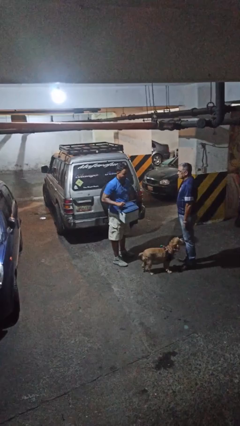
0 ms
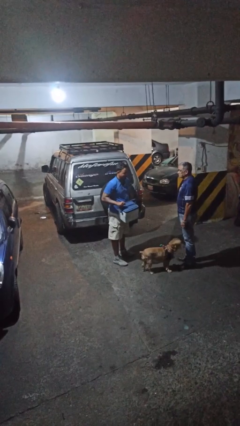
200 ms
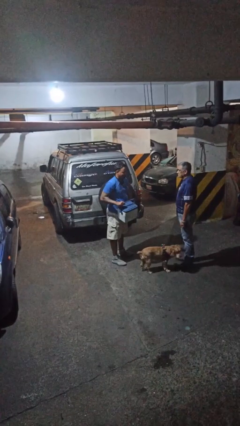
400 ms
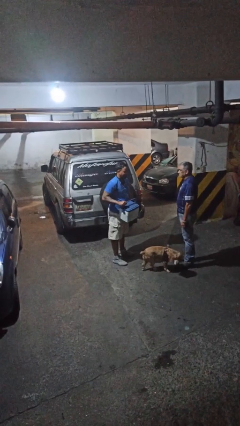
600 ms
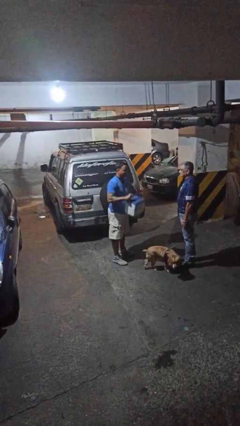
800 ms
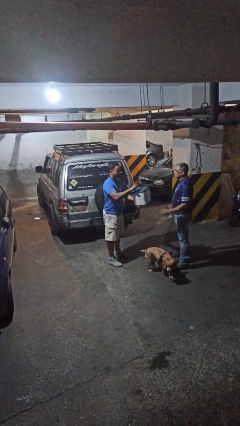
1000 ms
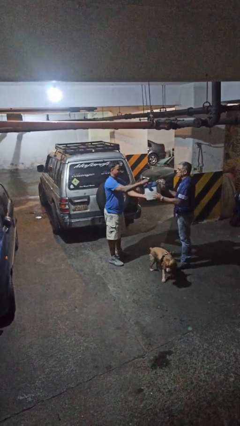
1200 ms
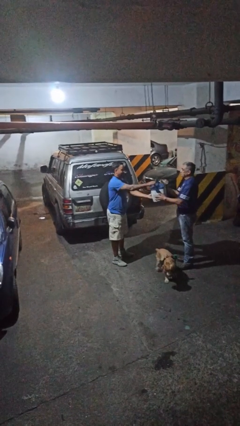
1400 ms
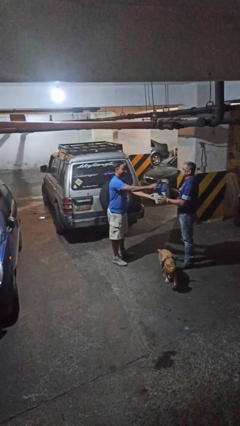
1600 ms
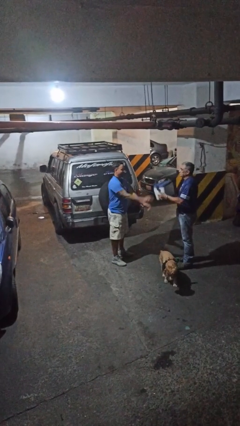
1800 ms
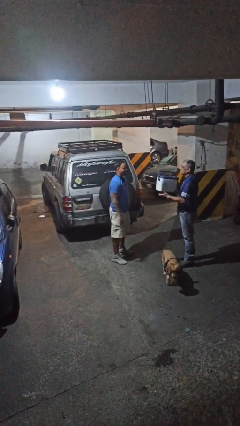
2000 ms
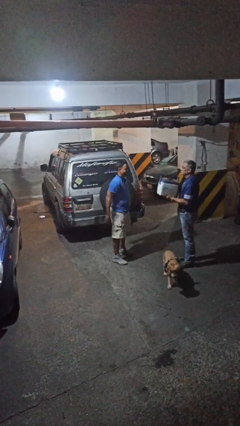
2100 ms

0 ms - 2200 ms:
person transfers object to person

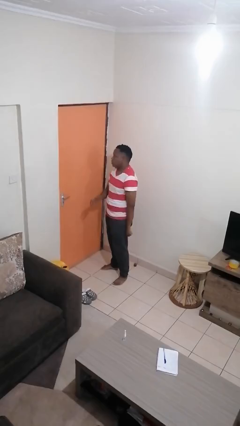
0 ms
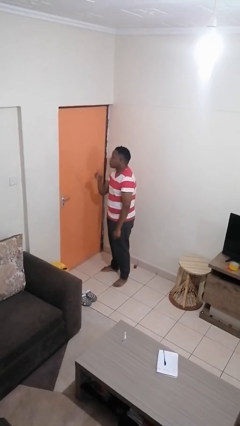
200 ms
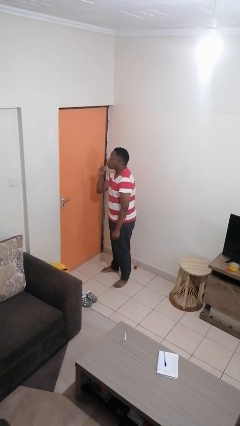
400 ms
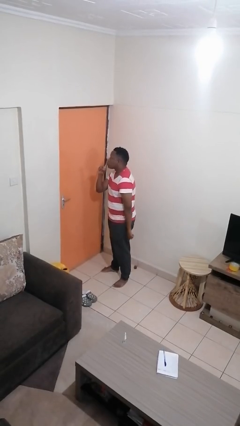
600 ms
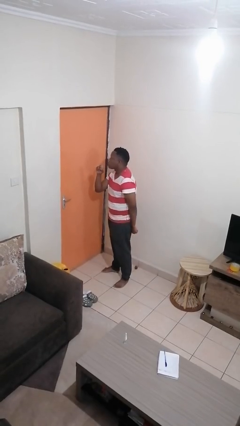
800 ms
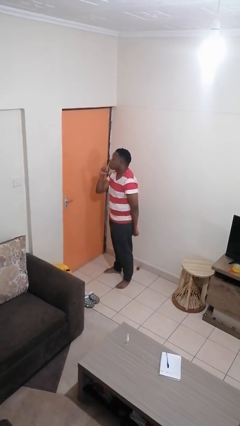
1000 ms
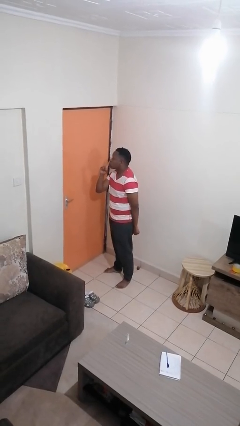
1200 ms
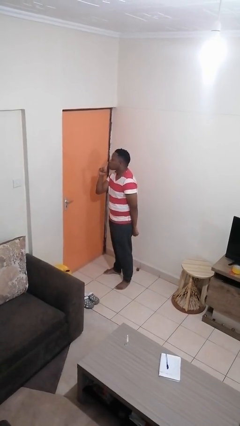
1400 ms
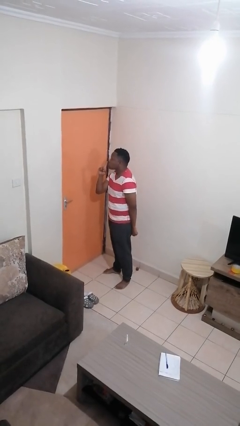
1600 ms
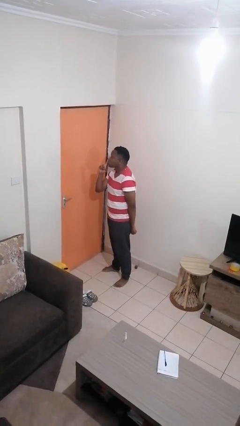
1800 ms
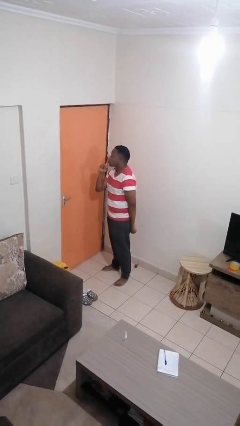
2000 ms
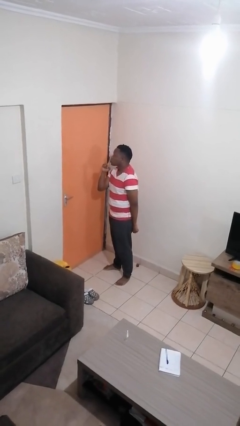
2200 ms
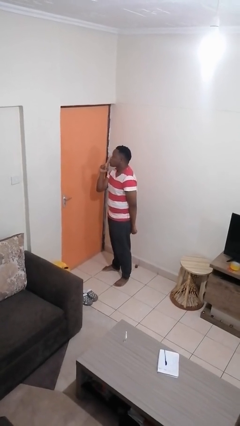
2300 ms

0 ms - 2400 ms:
person gestures be quiet

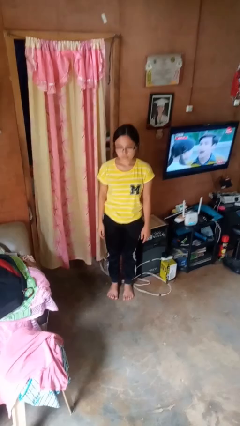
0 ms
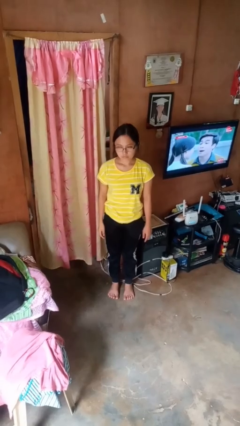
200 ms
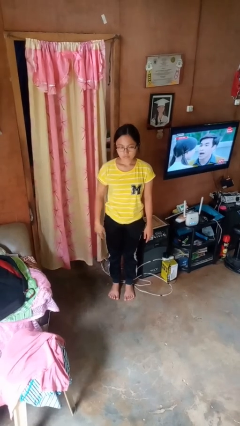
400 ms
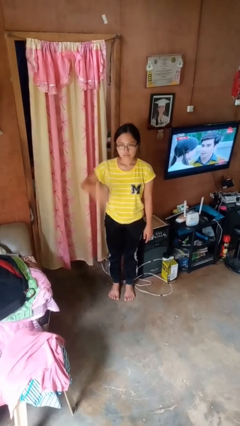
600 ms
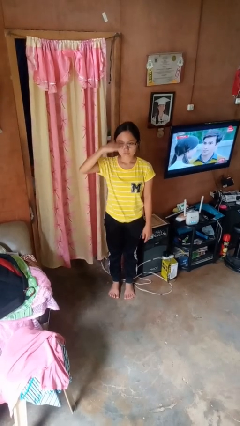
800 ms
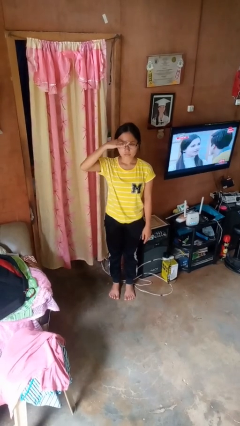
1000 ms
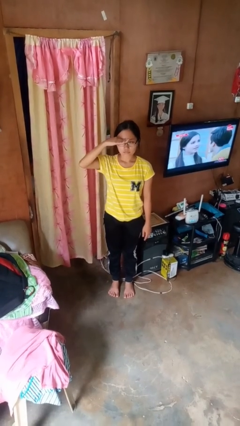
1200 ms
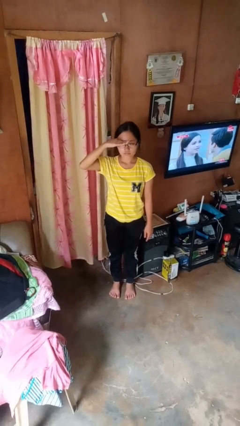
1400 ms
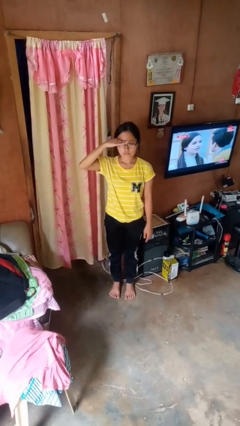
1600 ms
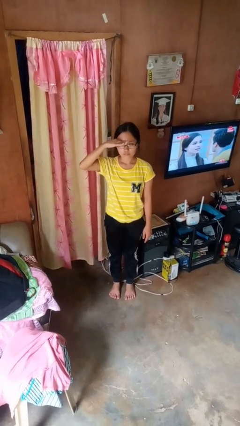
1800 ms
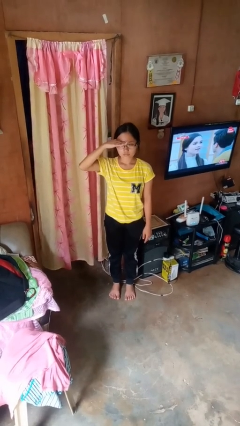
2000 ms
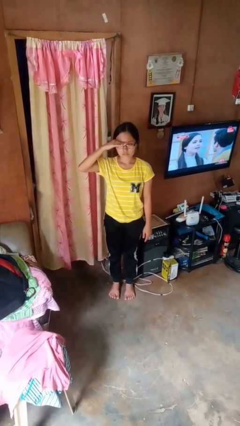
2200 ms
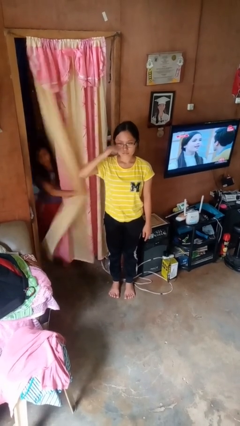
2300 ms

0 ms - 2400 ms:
person salutes

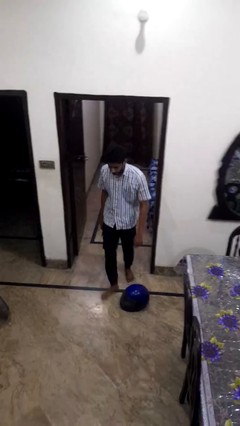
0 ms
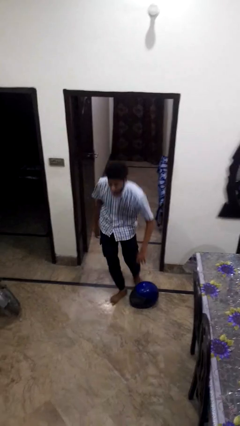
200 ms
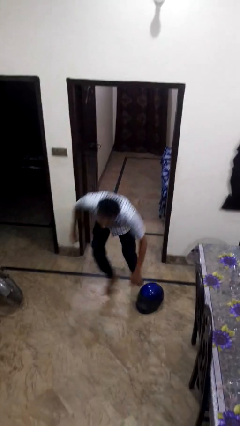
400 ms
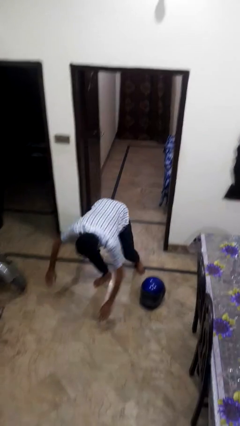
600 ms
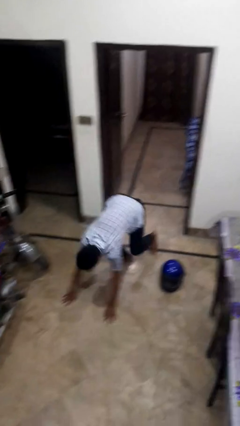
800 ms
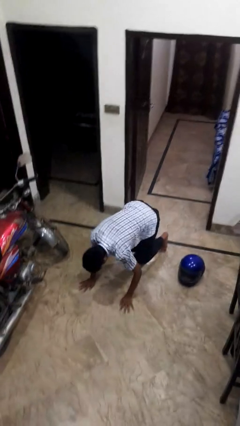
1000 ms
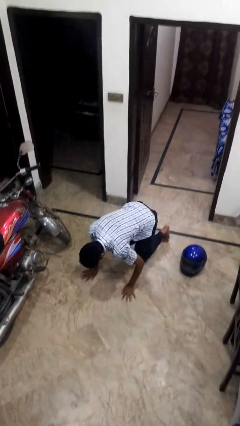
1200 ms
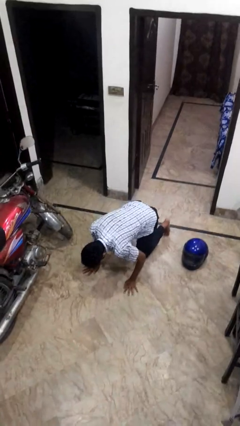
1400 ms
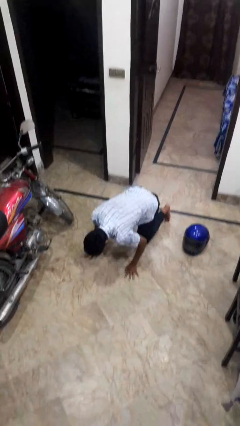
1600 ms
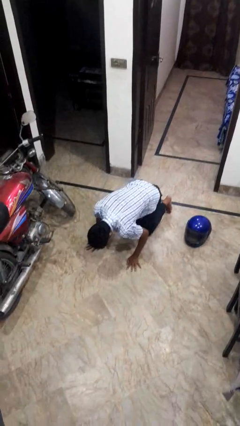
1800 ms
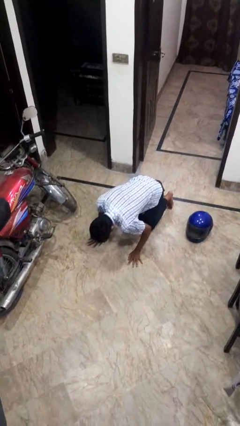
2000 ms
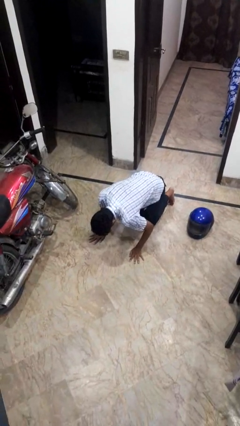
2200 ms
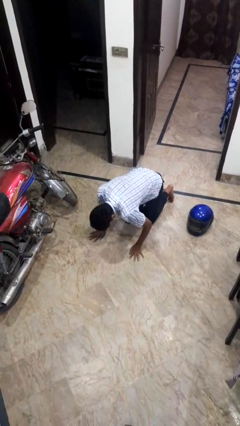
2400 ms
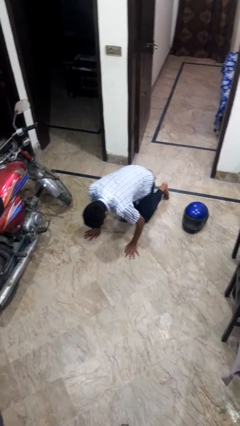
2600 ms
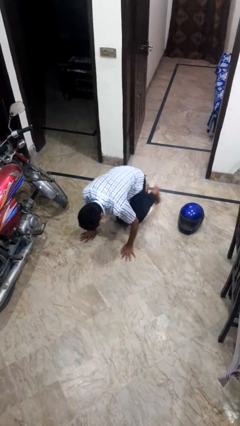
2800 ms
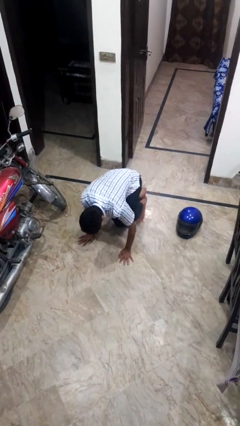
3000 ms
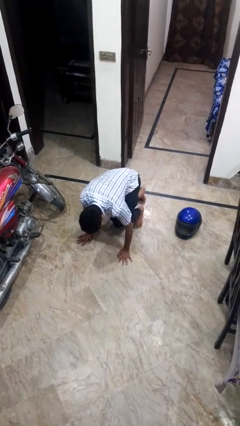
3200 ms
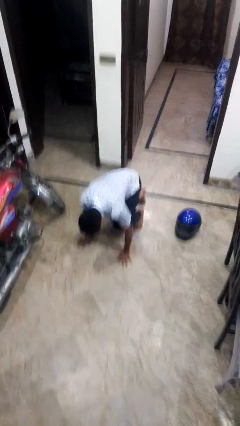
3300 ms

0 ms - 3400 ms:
person trips on object on floor

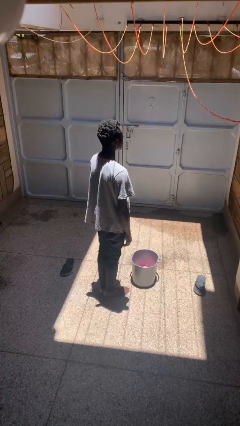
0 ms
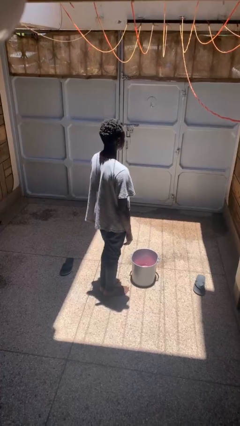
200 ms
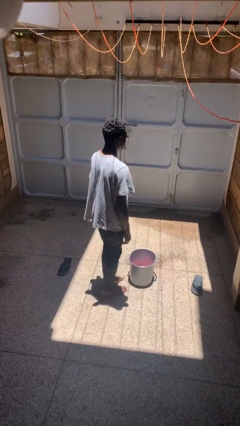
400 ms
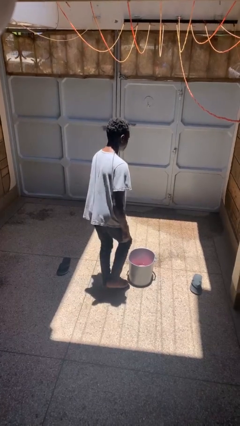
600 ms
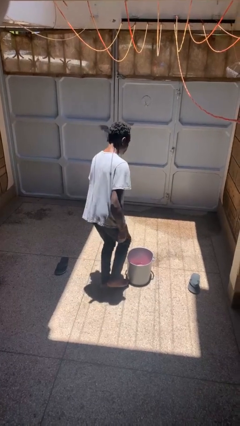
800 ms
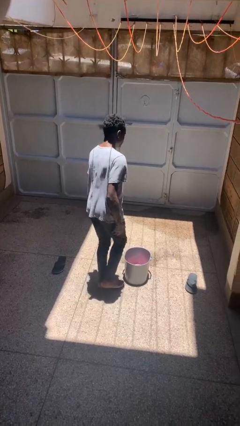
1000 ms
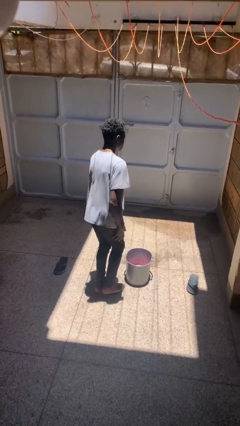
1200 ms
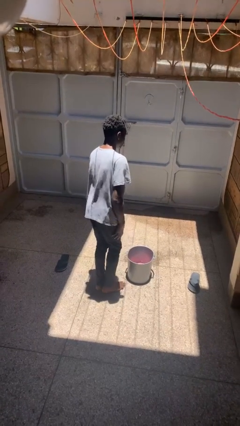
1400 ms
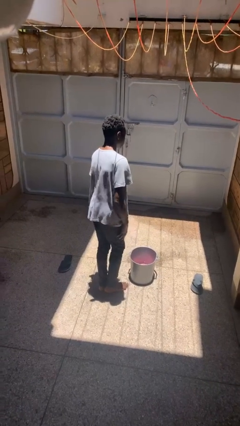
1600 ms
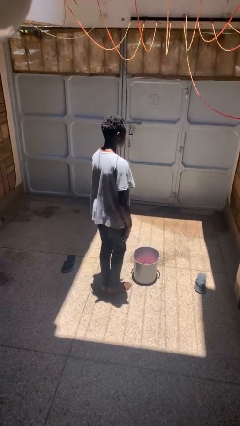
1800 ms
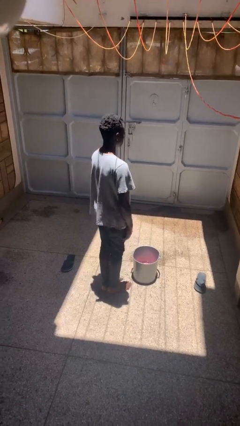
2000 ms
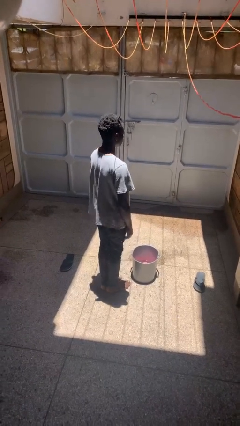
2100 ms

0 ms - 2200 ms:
person stubs toe

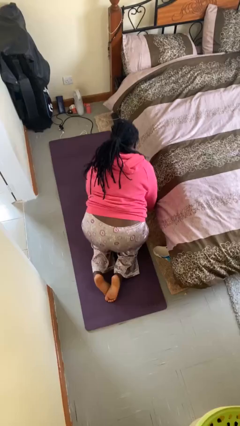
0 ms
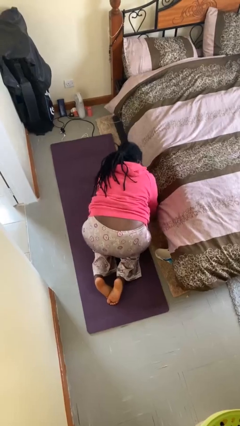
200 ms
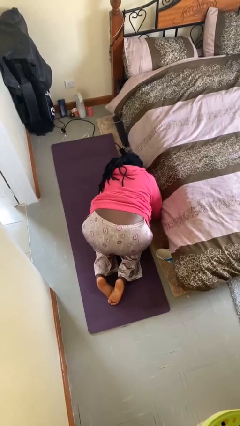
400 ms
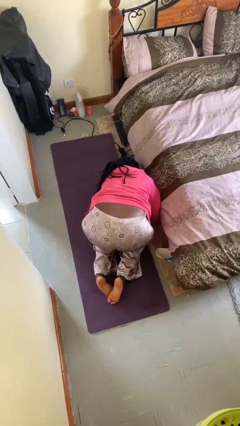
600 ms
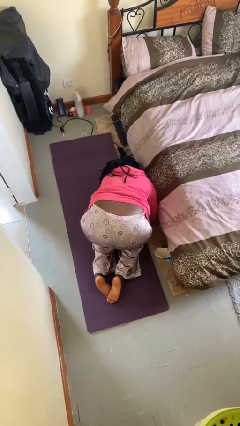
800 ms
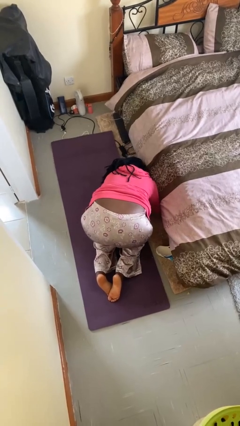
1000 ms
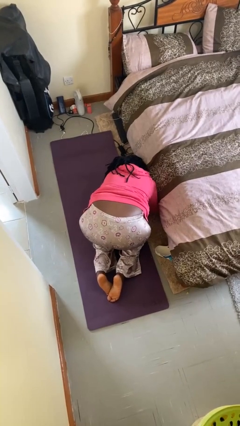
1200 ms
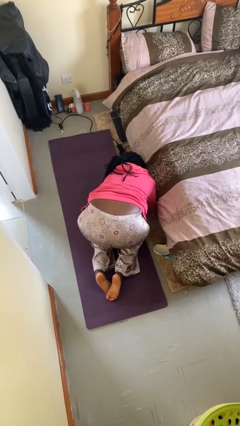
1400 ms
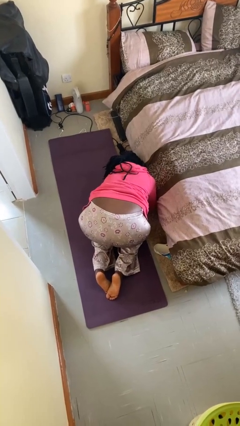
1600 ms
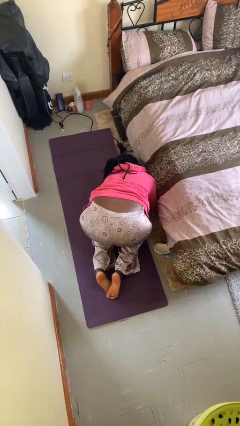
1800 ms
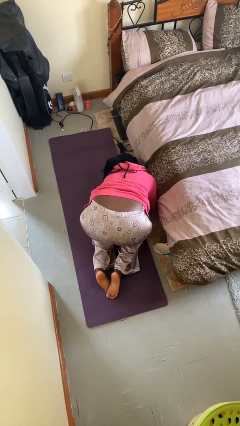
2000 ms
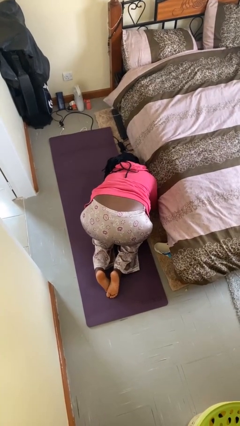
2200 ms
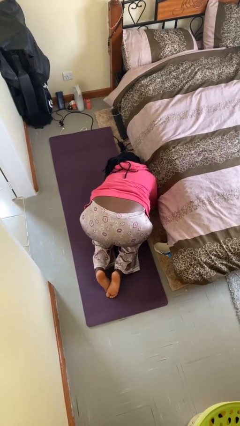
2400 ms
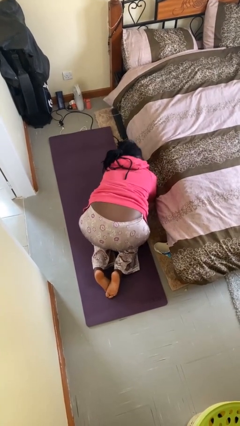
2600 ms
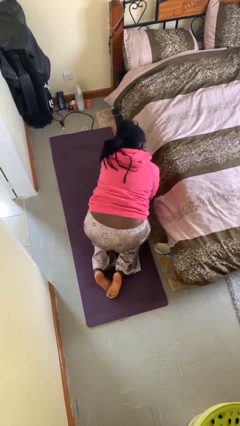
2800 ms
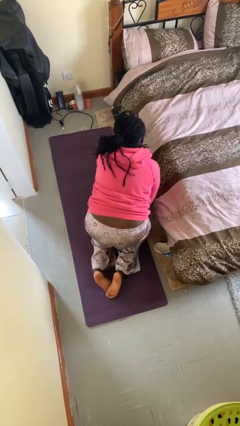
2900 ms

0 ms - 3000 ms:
person searches under bed

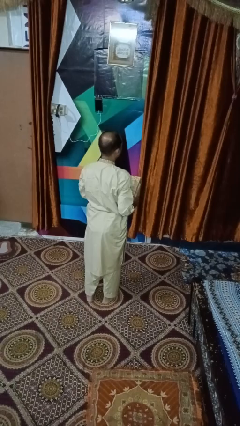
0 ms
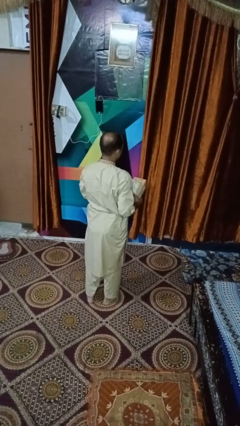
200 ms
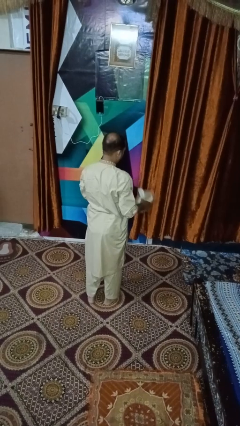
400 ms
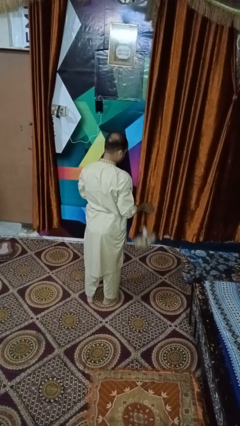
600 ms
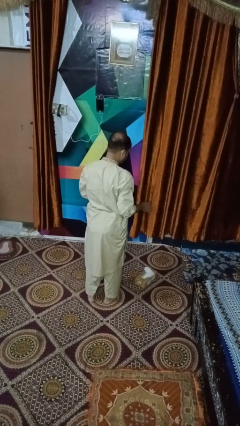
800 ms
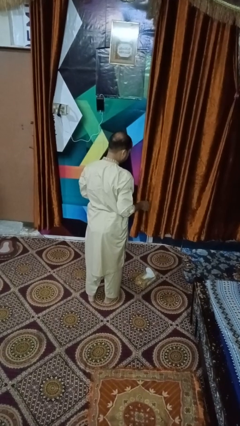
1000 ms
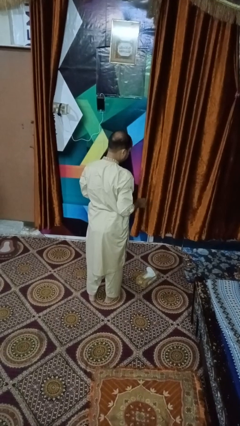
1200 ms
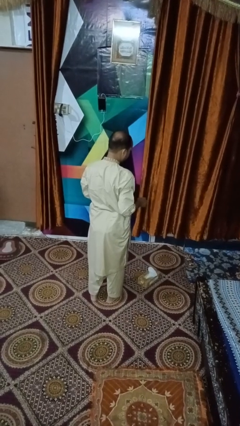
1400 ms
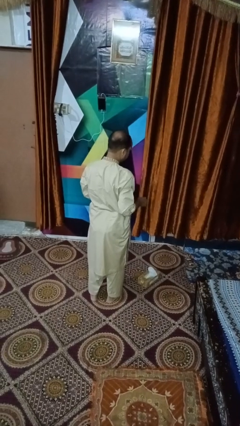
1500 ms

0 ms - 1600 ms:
person drops object
